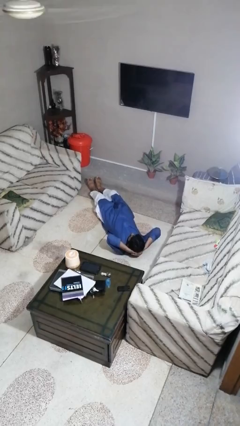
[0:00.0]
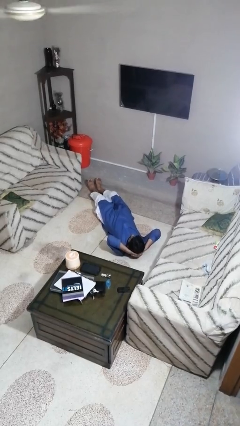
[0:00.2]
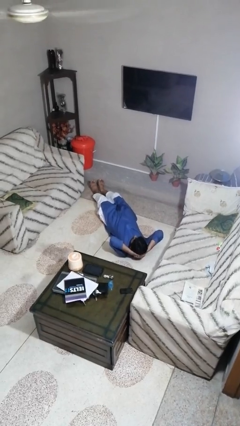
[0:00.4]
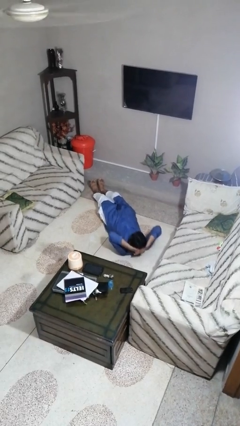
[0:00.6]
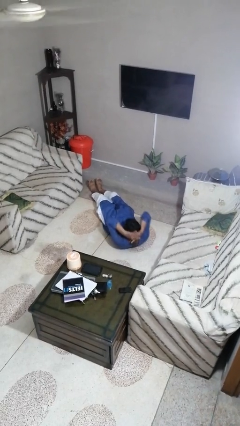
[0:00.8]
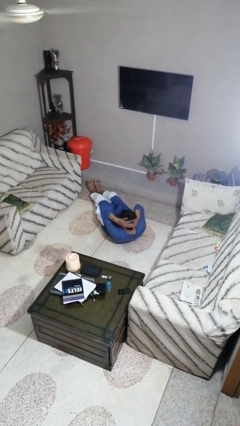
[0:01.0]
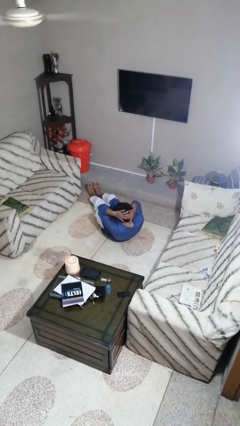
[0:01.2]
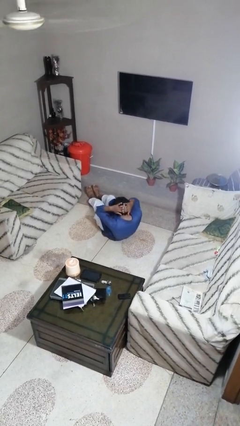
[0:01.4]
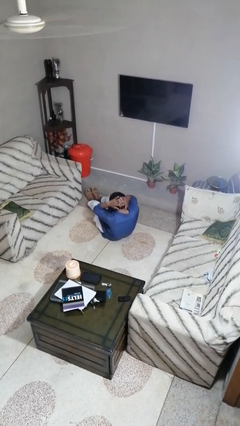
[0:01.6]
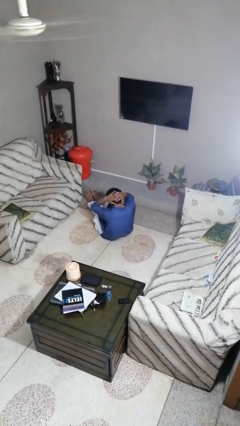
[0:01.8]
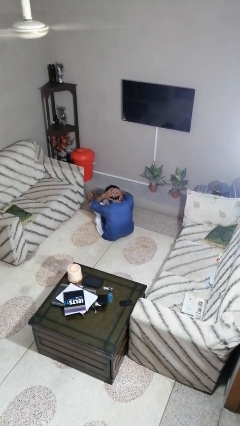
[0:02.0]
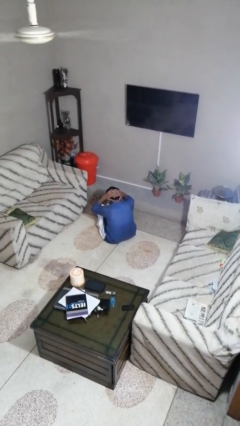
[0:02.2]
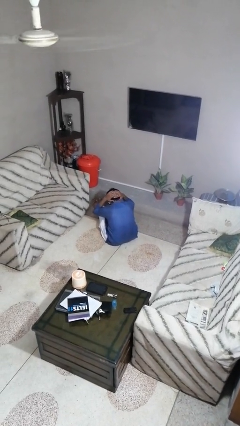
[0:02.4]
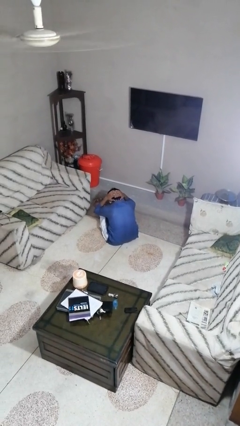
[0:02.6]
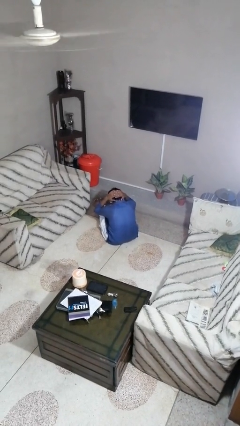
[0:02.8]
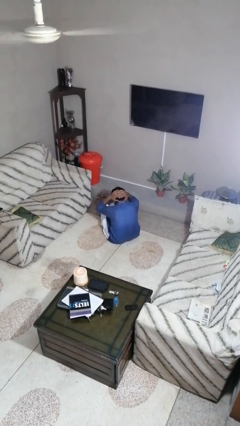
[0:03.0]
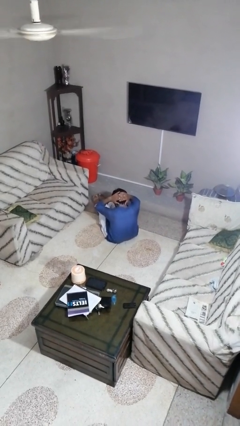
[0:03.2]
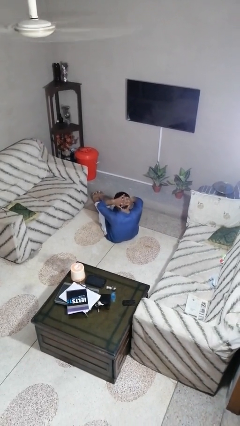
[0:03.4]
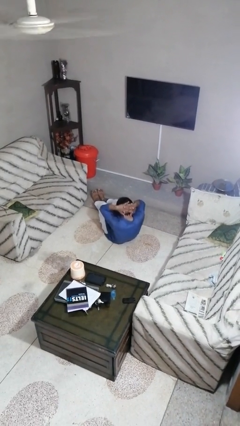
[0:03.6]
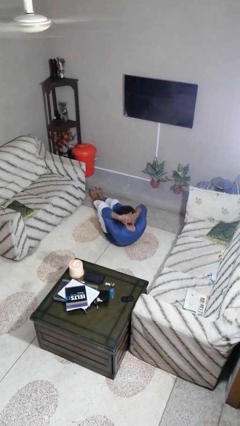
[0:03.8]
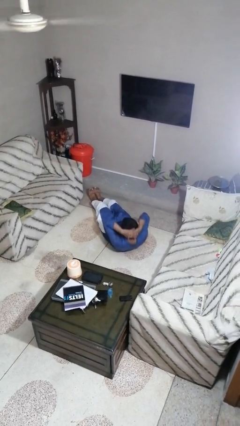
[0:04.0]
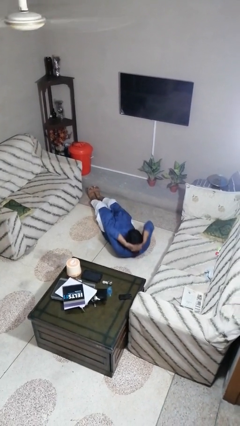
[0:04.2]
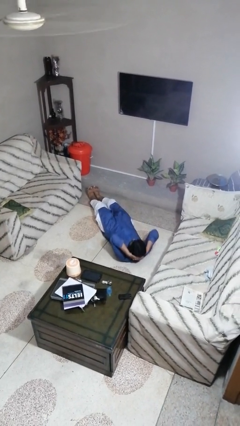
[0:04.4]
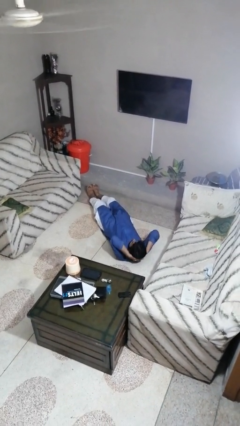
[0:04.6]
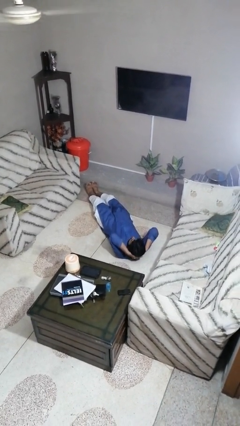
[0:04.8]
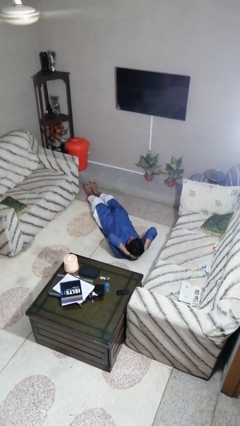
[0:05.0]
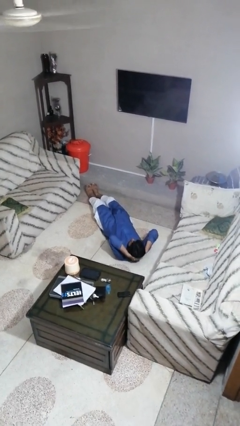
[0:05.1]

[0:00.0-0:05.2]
person exercises with situp

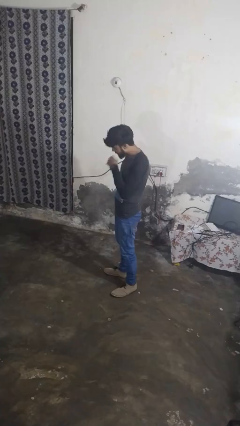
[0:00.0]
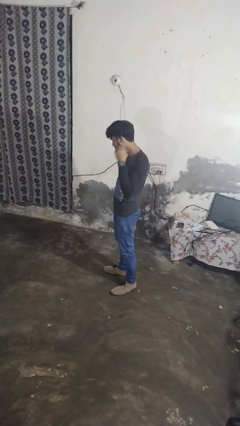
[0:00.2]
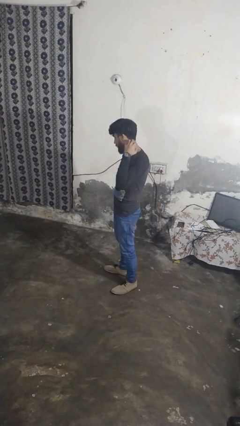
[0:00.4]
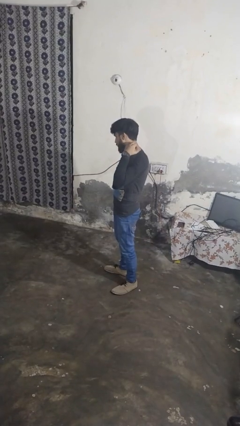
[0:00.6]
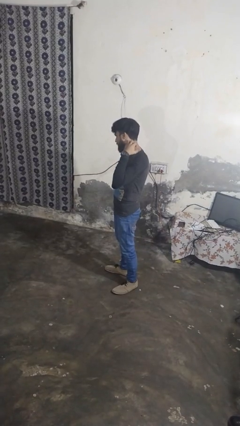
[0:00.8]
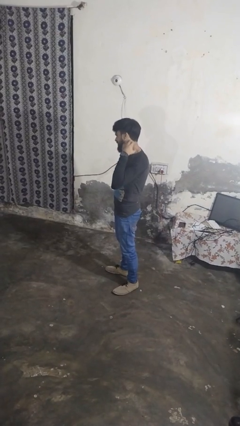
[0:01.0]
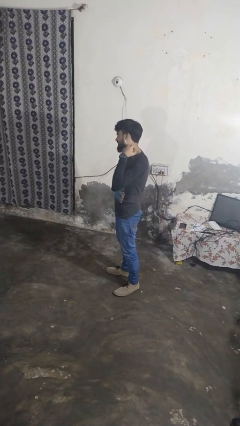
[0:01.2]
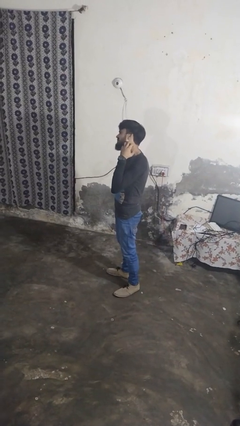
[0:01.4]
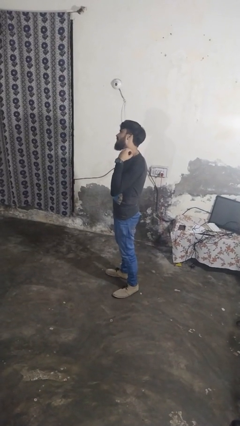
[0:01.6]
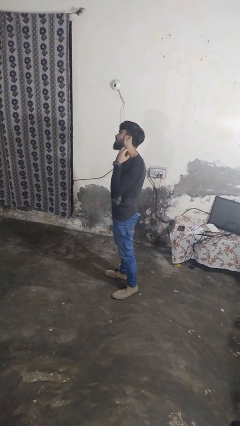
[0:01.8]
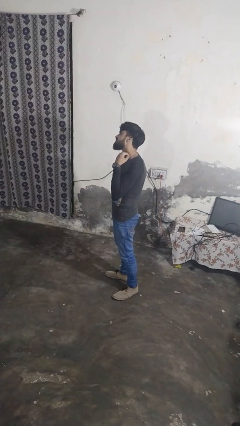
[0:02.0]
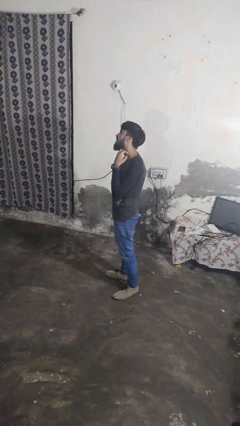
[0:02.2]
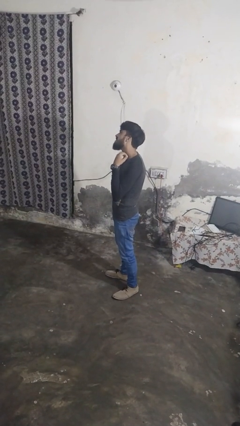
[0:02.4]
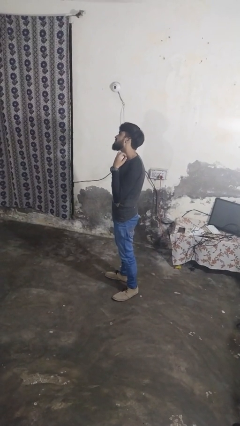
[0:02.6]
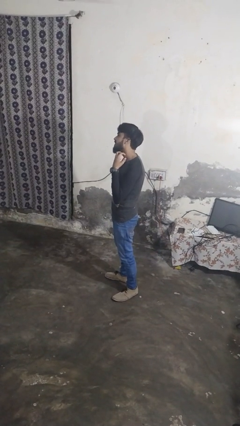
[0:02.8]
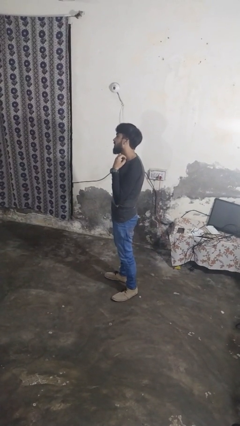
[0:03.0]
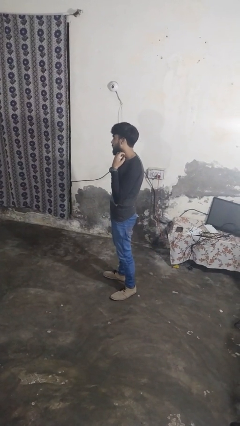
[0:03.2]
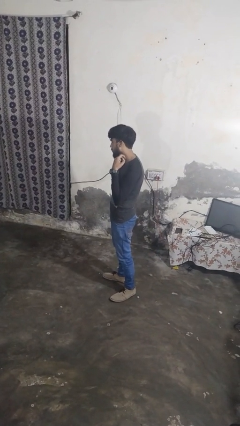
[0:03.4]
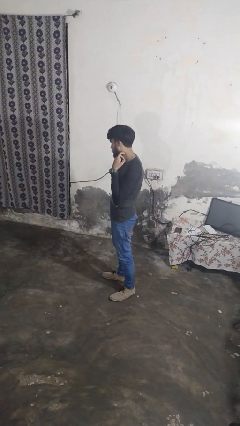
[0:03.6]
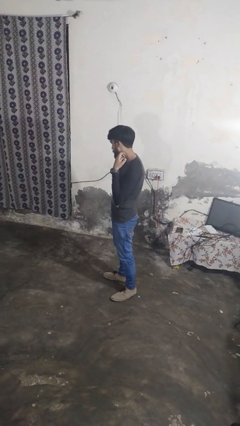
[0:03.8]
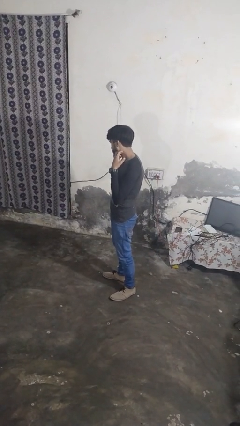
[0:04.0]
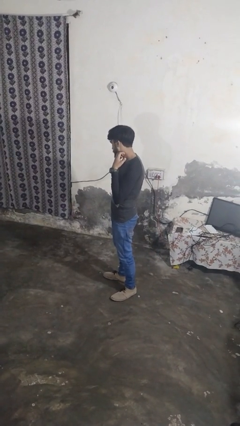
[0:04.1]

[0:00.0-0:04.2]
person cracks knuckles

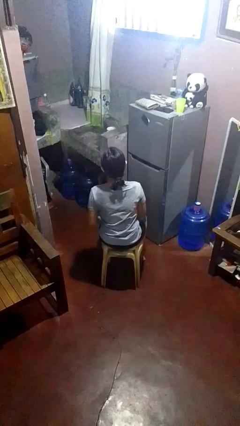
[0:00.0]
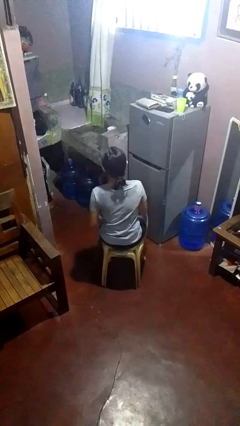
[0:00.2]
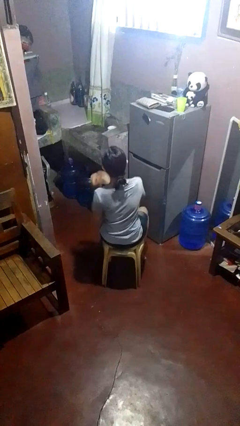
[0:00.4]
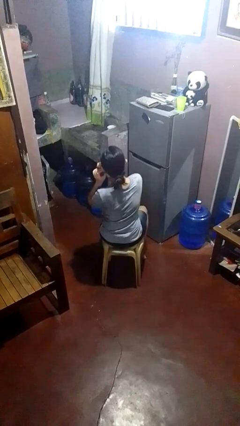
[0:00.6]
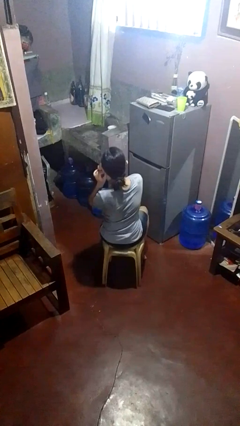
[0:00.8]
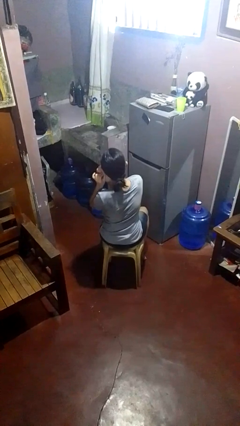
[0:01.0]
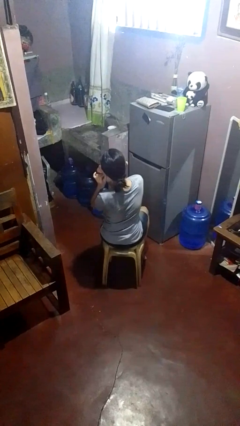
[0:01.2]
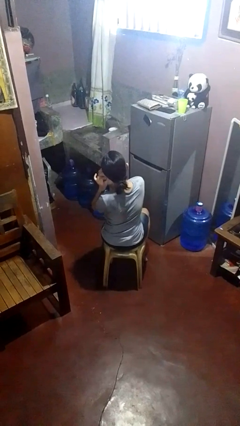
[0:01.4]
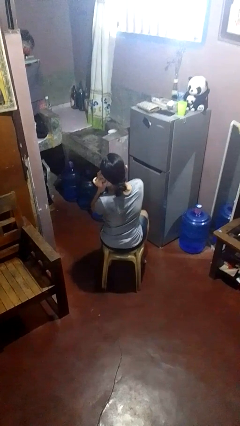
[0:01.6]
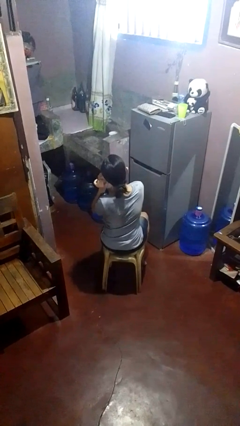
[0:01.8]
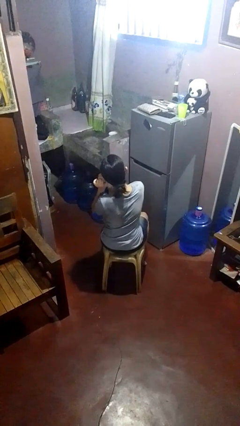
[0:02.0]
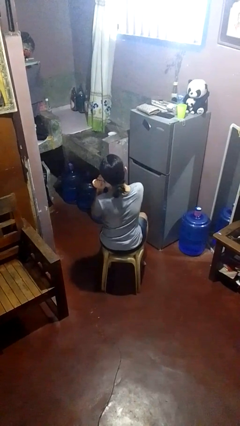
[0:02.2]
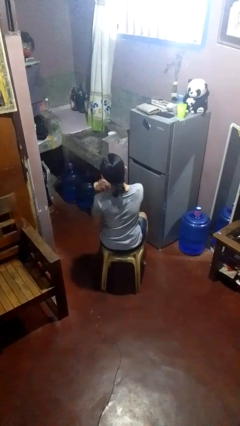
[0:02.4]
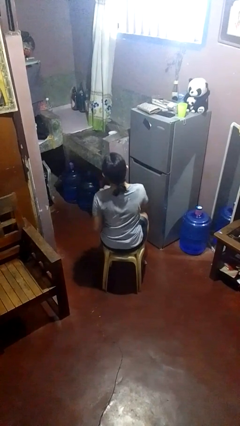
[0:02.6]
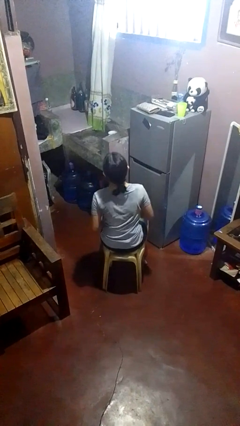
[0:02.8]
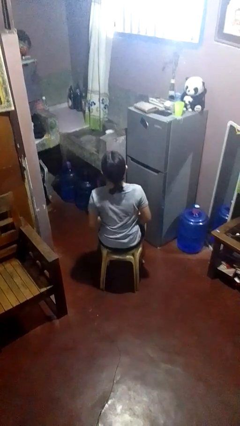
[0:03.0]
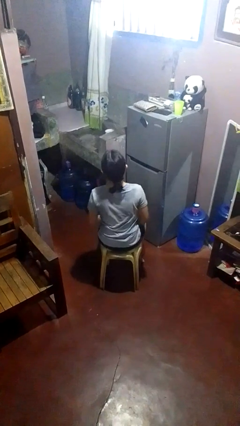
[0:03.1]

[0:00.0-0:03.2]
person takes off earrings

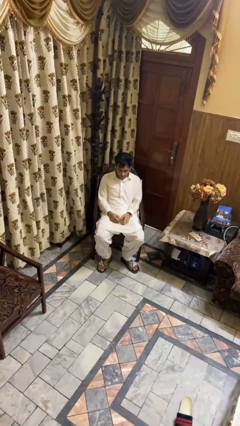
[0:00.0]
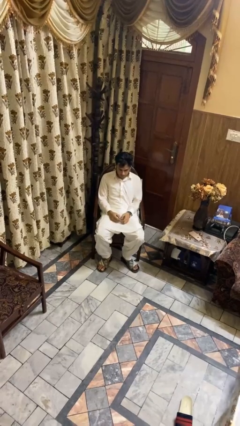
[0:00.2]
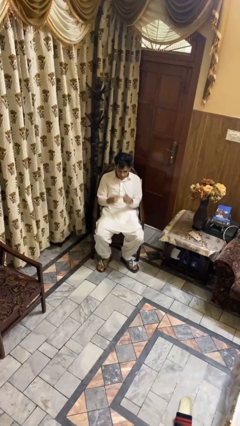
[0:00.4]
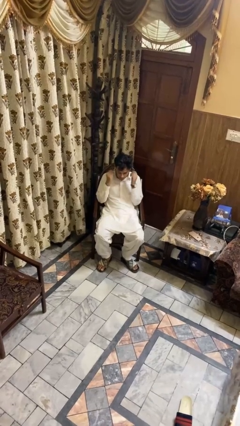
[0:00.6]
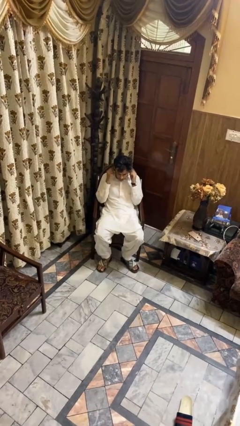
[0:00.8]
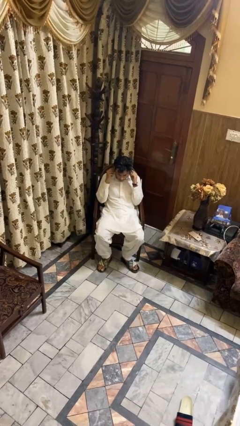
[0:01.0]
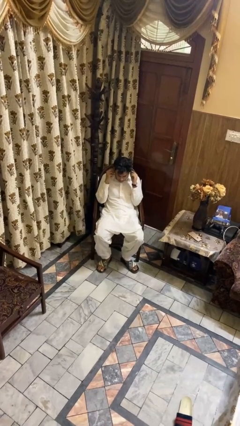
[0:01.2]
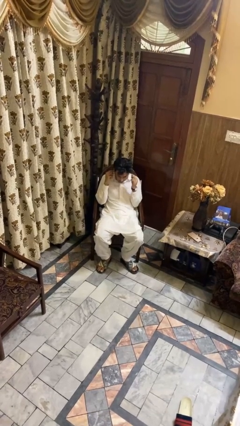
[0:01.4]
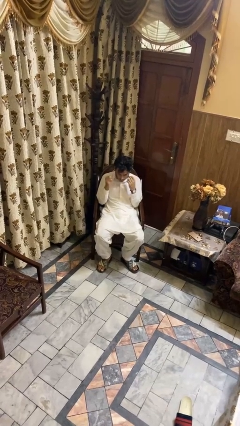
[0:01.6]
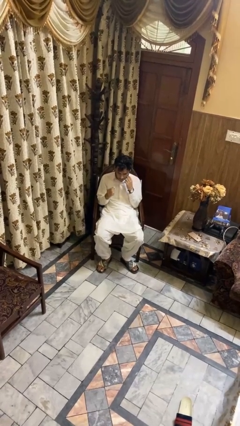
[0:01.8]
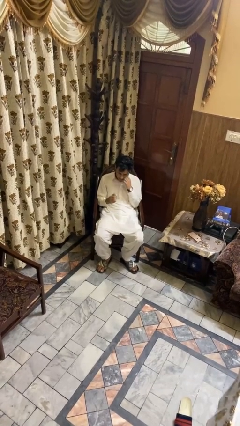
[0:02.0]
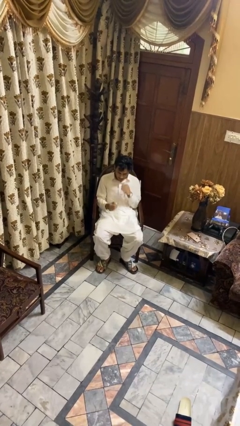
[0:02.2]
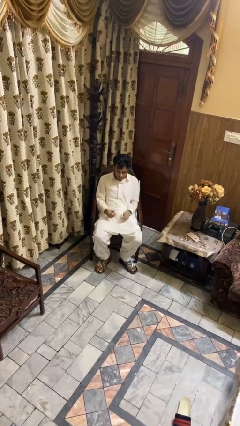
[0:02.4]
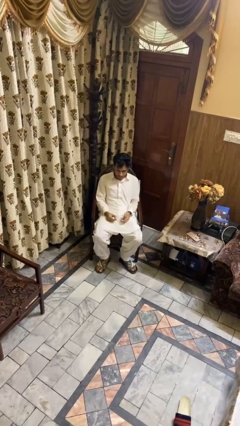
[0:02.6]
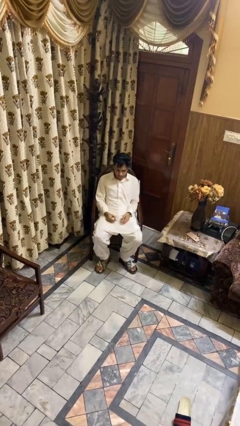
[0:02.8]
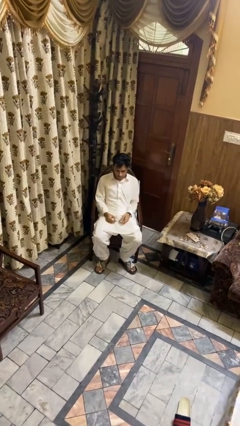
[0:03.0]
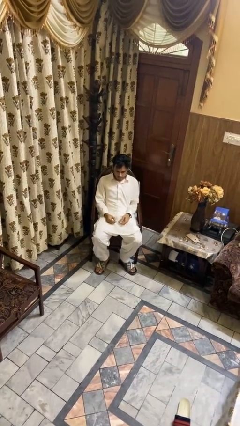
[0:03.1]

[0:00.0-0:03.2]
person takes off headphones

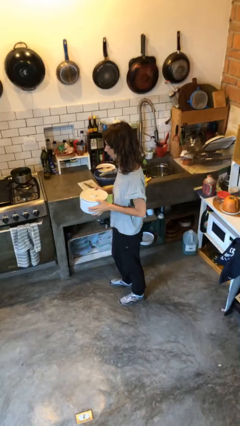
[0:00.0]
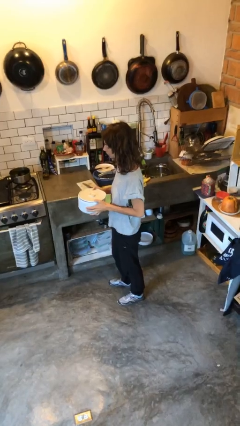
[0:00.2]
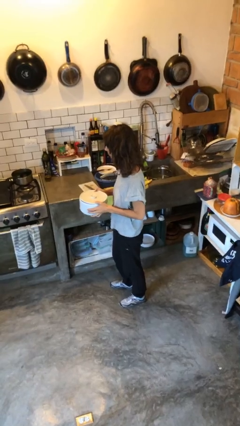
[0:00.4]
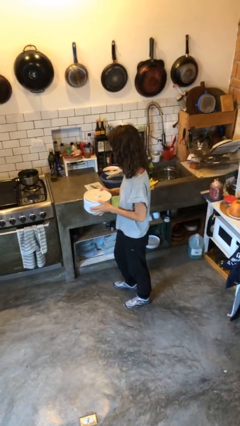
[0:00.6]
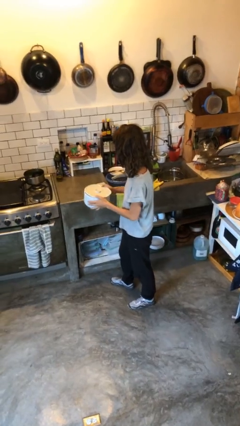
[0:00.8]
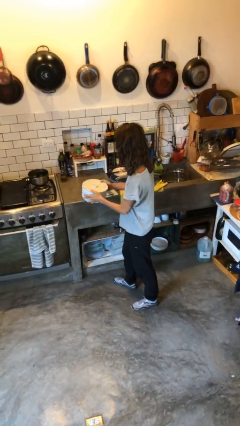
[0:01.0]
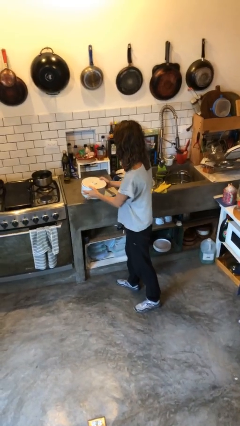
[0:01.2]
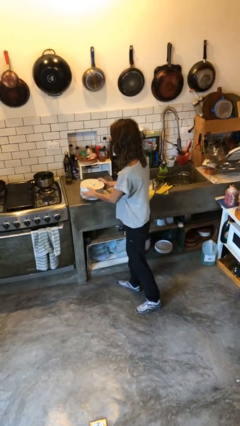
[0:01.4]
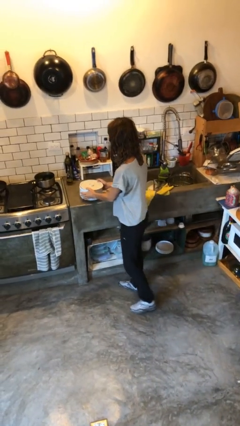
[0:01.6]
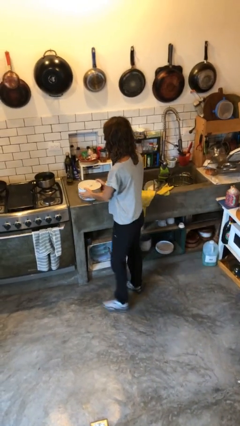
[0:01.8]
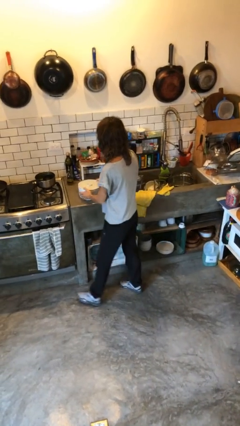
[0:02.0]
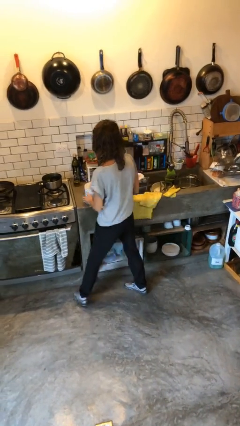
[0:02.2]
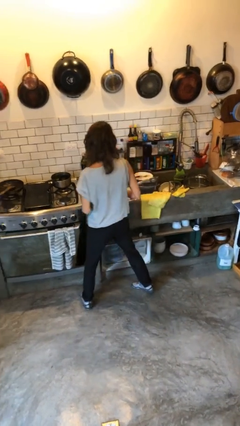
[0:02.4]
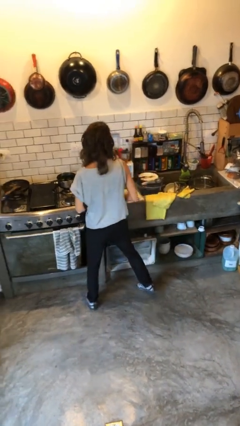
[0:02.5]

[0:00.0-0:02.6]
person puts down object on countertop
